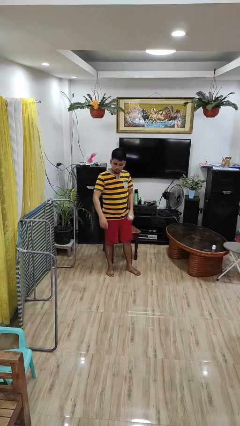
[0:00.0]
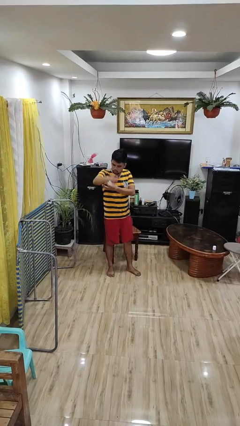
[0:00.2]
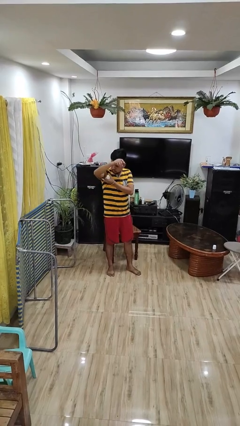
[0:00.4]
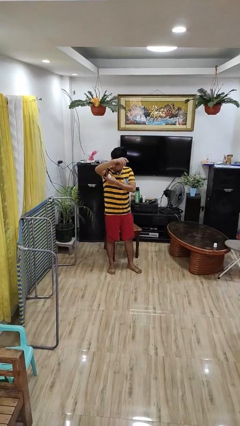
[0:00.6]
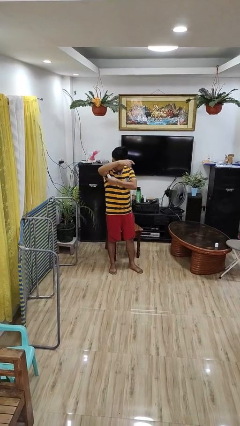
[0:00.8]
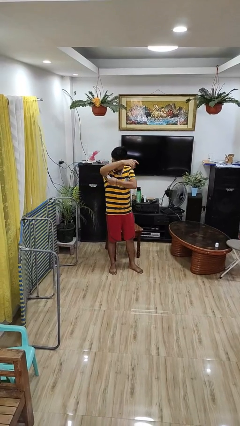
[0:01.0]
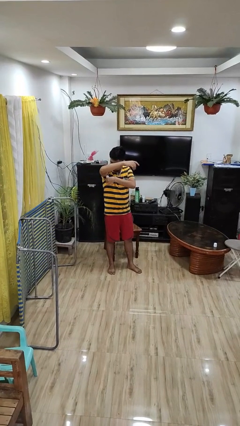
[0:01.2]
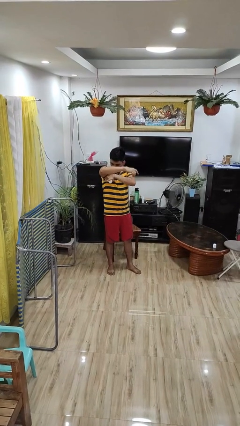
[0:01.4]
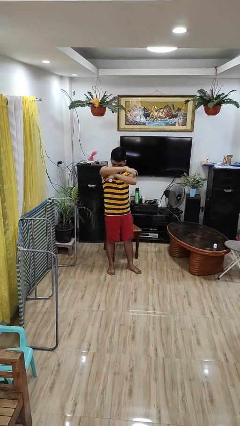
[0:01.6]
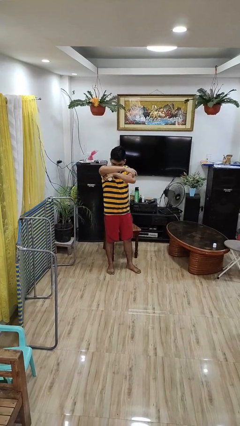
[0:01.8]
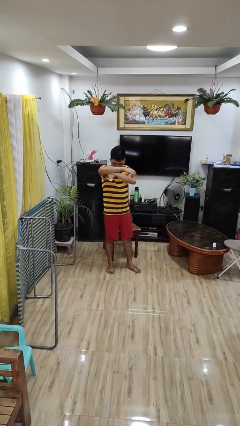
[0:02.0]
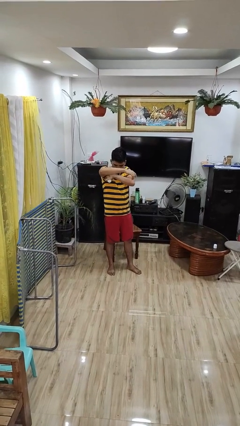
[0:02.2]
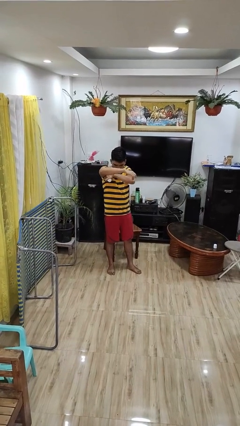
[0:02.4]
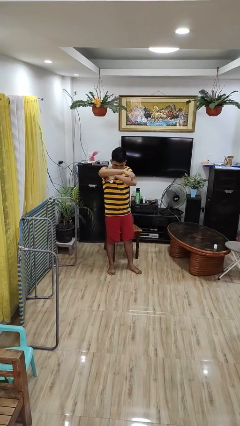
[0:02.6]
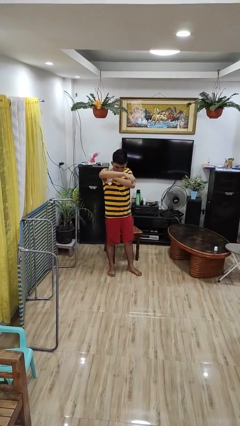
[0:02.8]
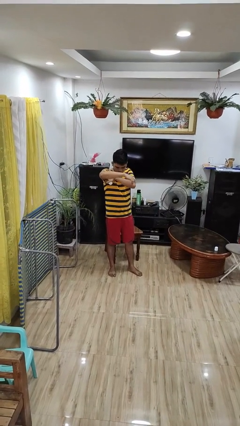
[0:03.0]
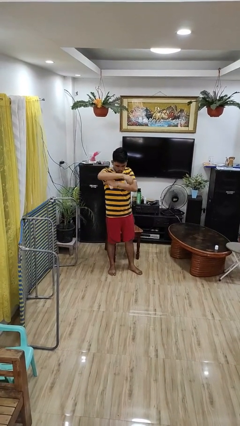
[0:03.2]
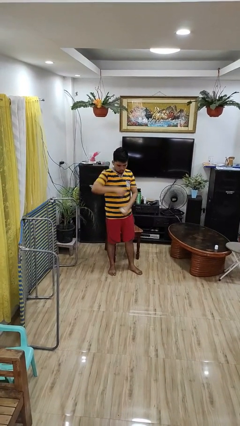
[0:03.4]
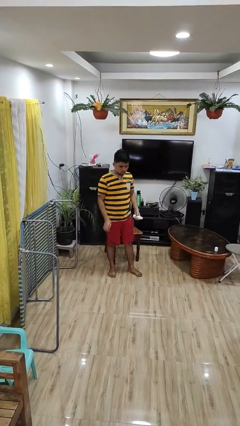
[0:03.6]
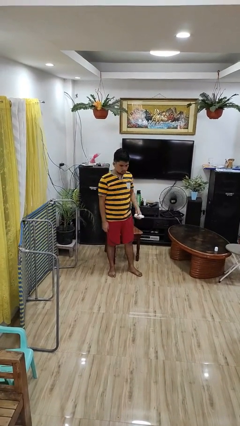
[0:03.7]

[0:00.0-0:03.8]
person applies deodorant

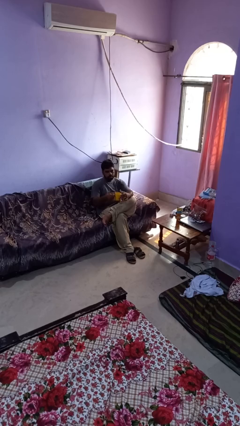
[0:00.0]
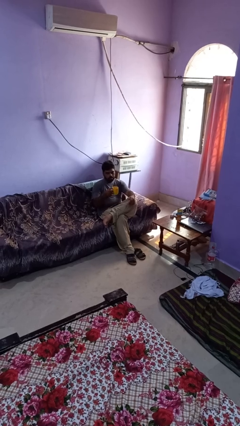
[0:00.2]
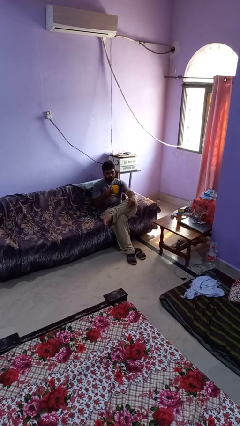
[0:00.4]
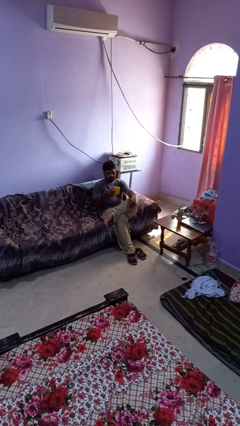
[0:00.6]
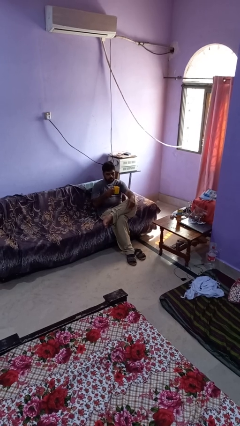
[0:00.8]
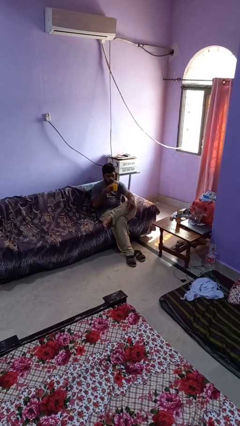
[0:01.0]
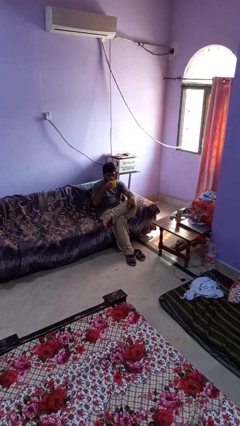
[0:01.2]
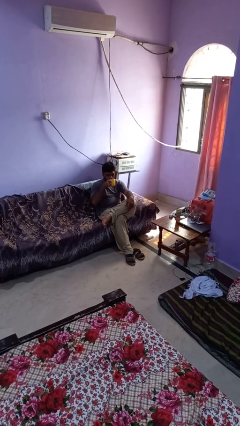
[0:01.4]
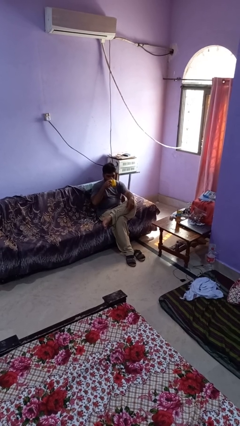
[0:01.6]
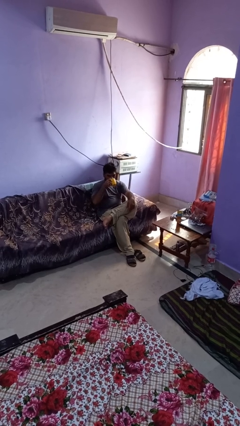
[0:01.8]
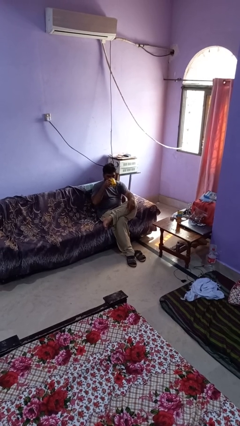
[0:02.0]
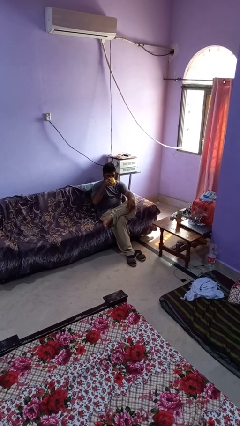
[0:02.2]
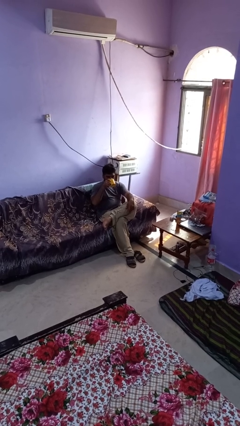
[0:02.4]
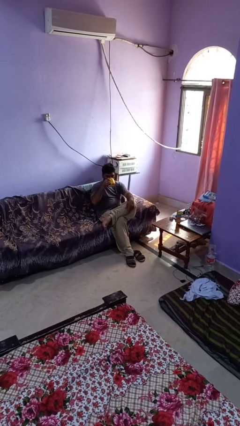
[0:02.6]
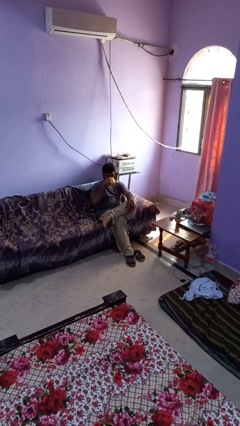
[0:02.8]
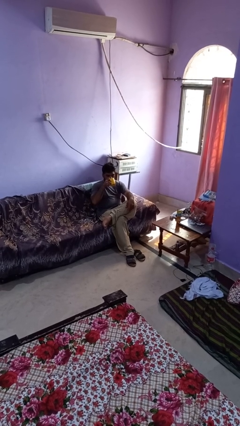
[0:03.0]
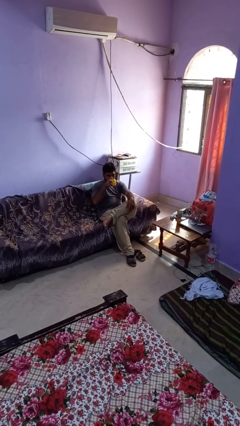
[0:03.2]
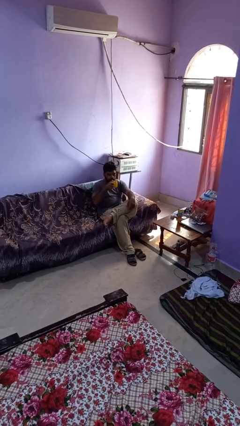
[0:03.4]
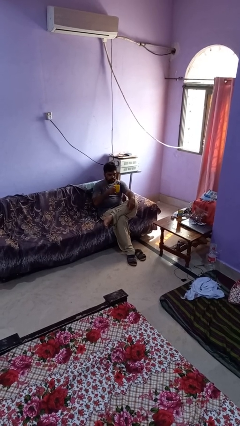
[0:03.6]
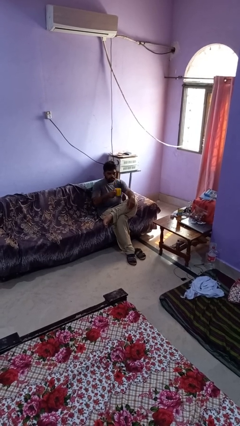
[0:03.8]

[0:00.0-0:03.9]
person drinks from mug

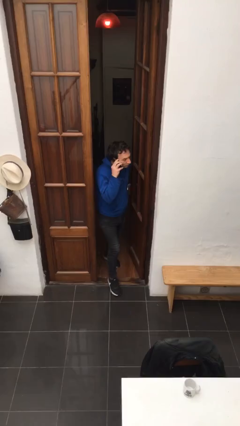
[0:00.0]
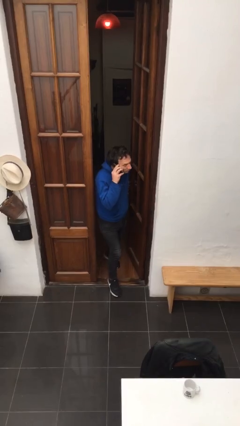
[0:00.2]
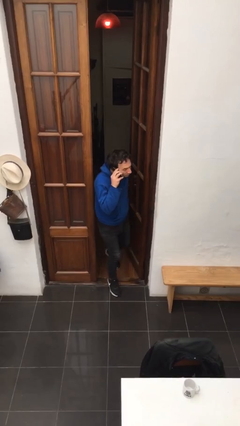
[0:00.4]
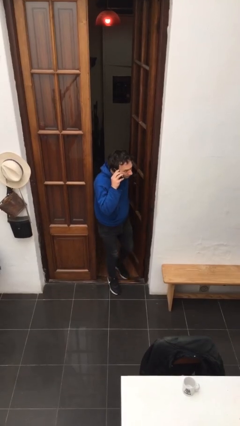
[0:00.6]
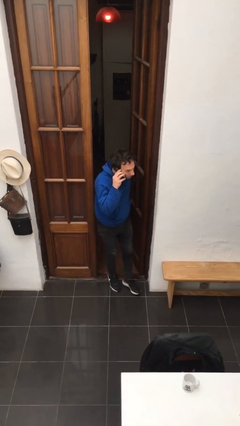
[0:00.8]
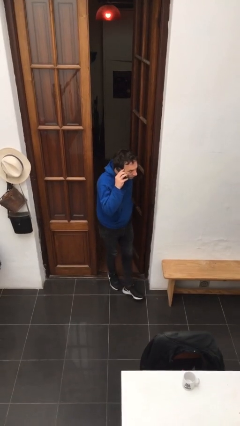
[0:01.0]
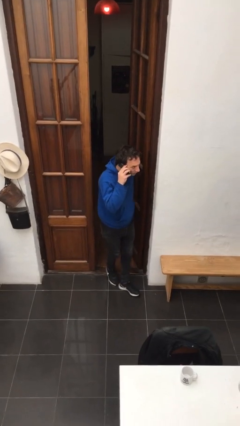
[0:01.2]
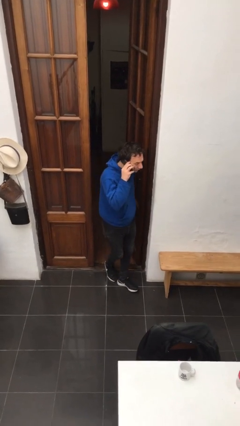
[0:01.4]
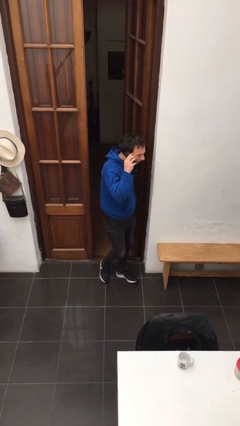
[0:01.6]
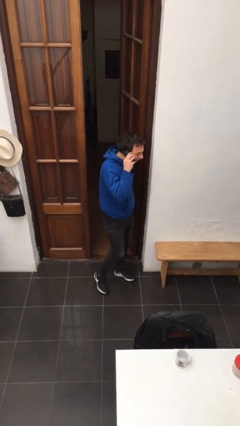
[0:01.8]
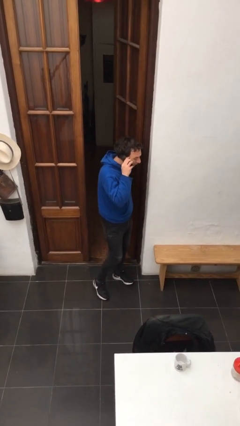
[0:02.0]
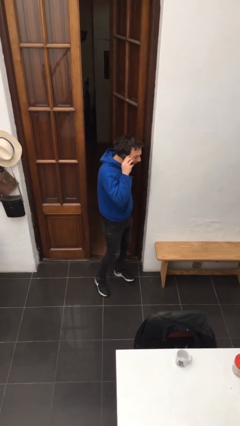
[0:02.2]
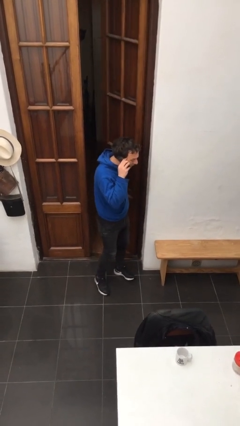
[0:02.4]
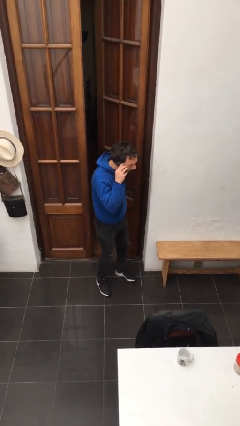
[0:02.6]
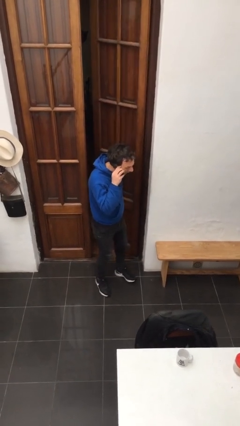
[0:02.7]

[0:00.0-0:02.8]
person enters scene through structure

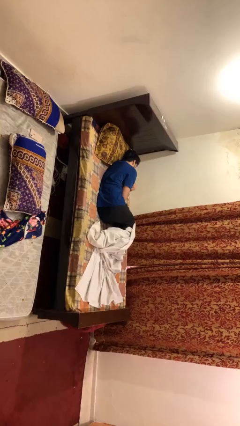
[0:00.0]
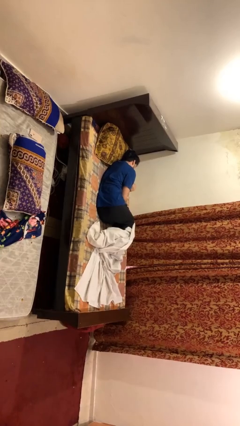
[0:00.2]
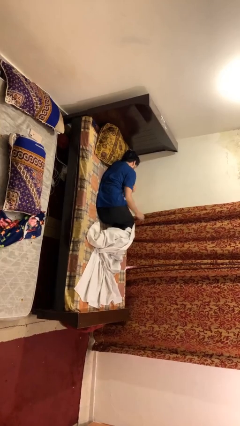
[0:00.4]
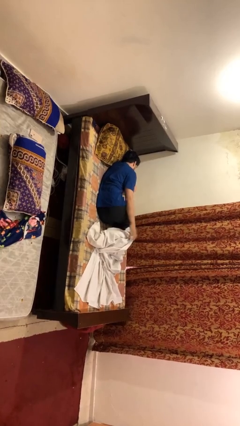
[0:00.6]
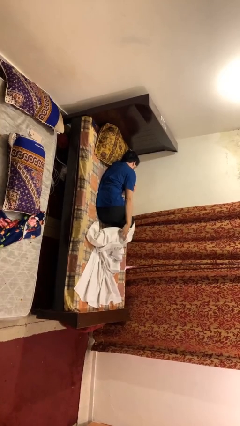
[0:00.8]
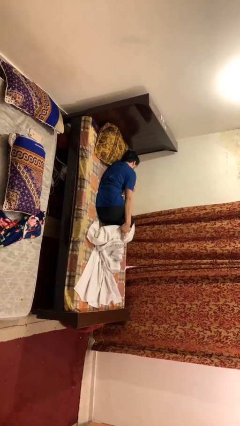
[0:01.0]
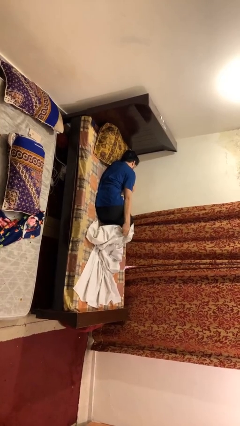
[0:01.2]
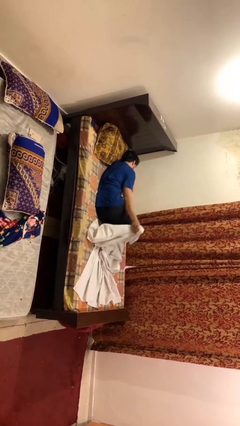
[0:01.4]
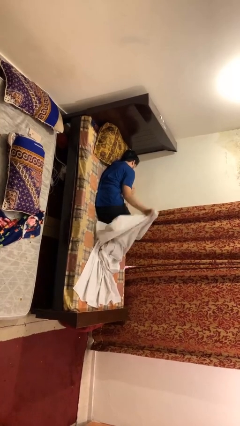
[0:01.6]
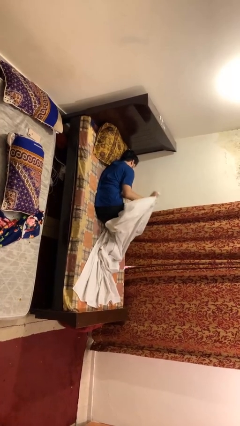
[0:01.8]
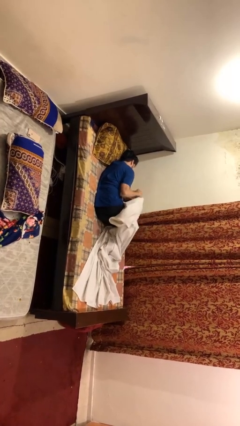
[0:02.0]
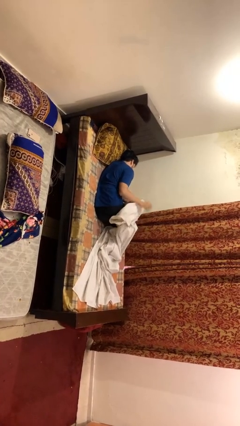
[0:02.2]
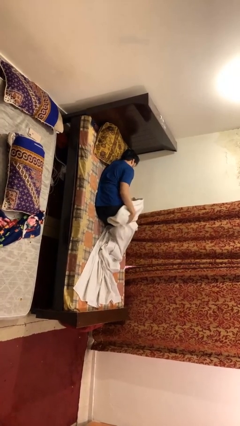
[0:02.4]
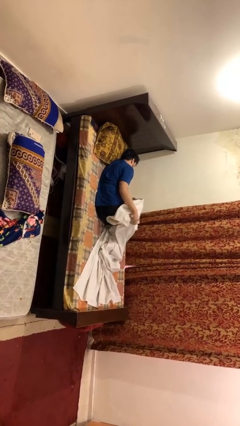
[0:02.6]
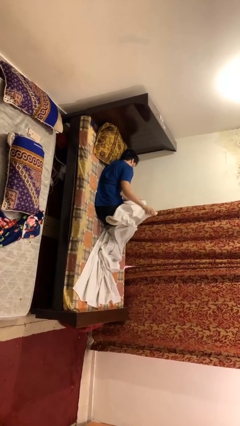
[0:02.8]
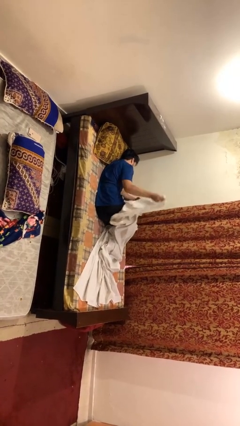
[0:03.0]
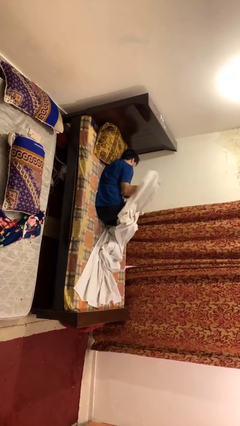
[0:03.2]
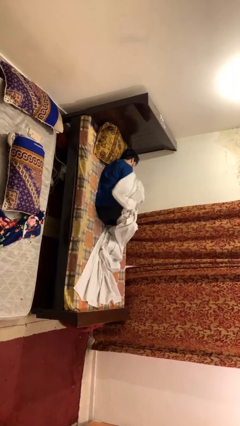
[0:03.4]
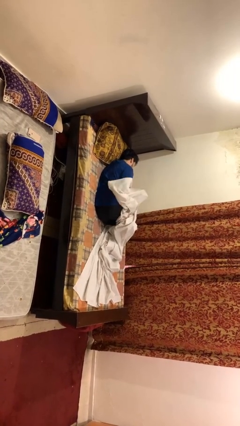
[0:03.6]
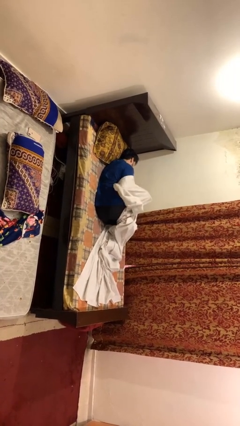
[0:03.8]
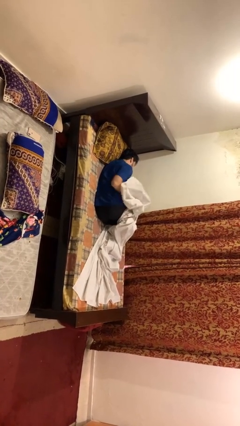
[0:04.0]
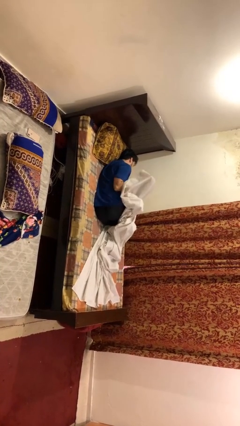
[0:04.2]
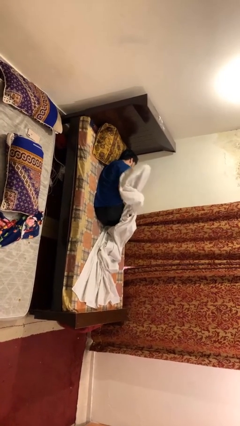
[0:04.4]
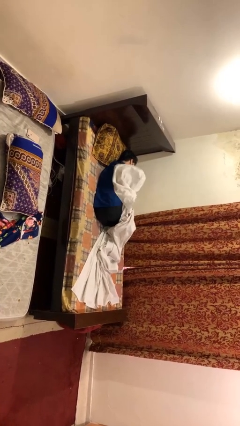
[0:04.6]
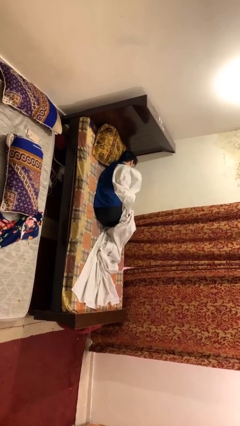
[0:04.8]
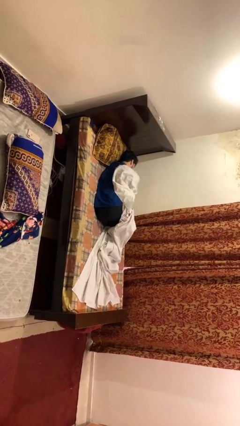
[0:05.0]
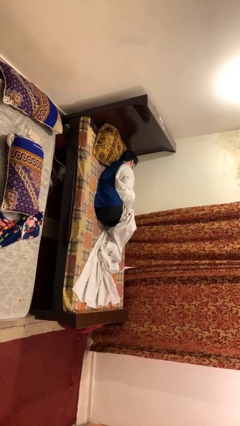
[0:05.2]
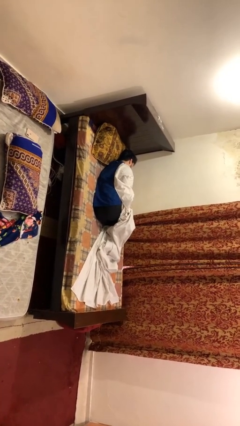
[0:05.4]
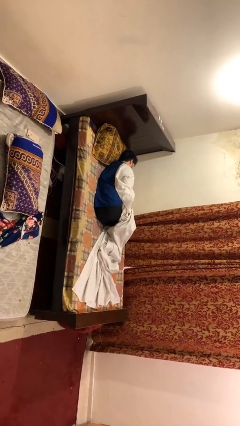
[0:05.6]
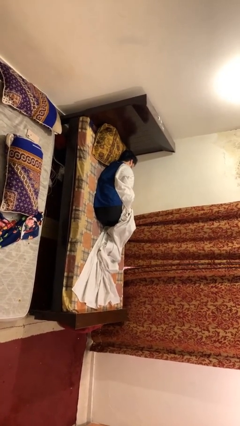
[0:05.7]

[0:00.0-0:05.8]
person covers with bedsheets

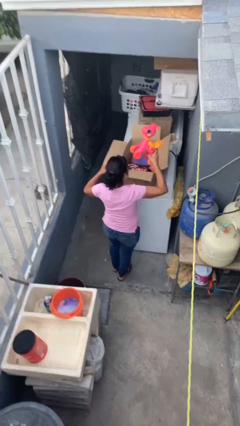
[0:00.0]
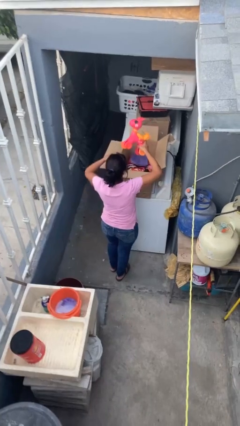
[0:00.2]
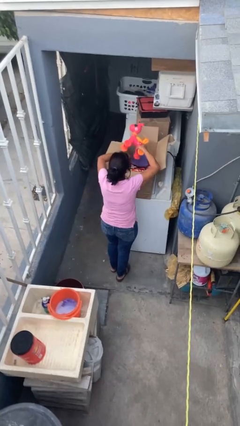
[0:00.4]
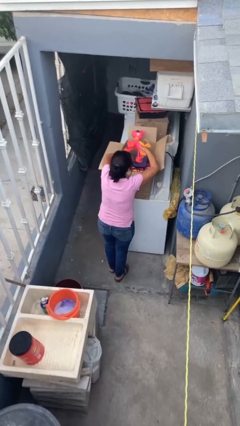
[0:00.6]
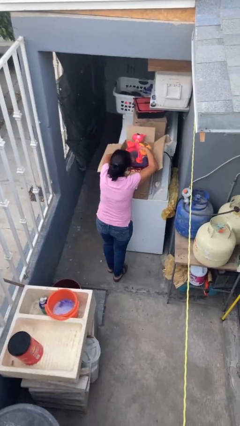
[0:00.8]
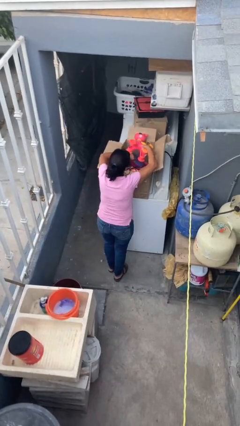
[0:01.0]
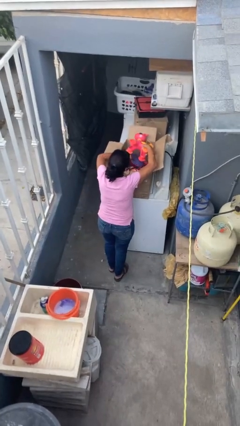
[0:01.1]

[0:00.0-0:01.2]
person puts object into box
